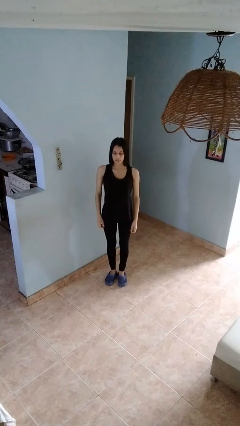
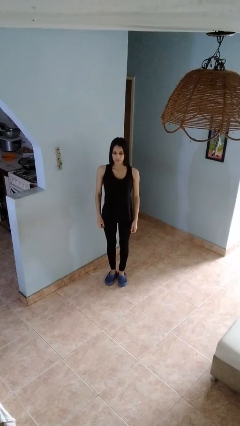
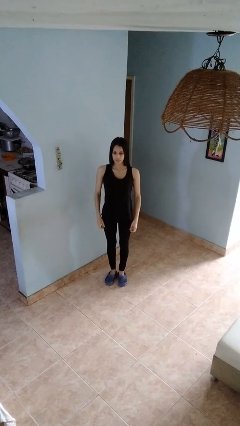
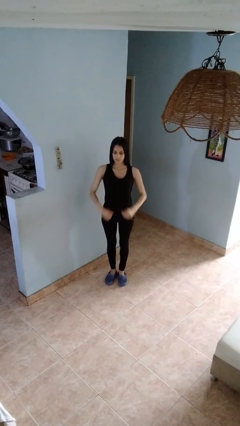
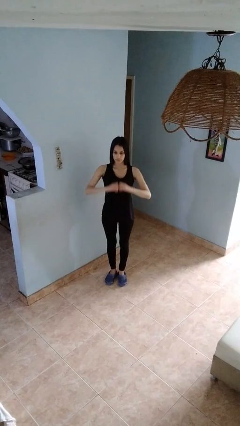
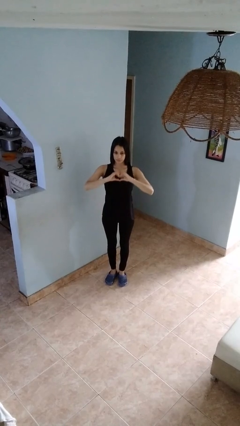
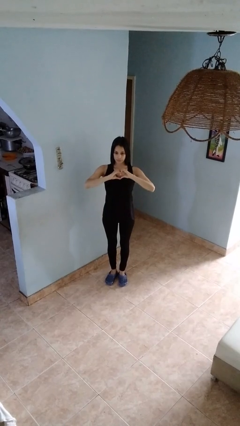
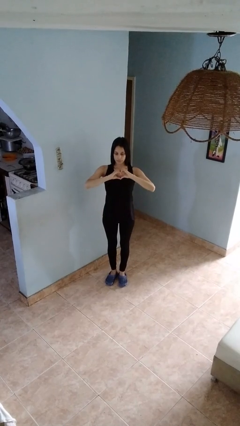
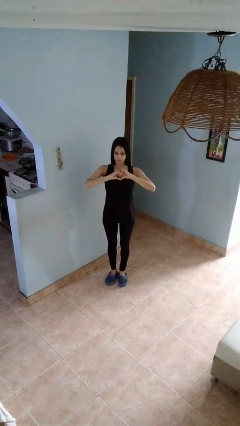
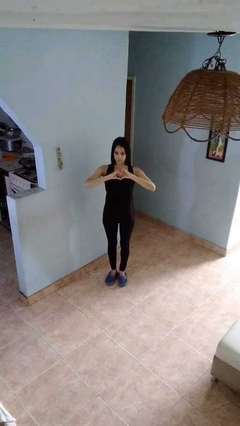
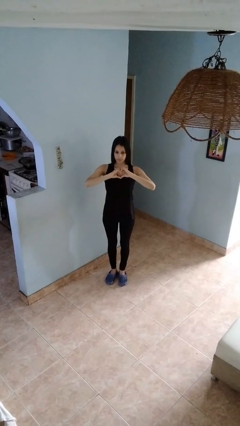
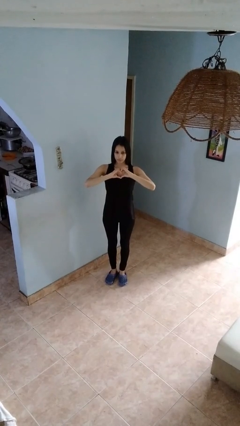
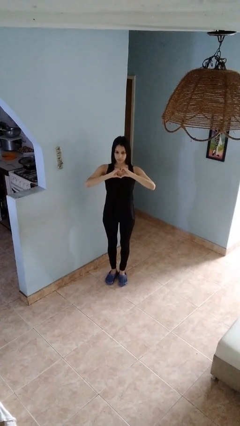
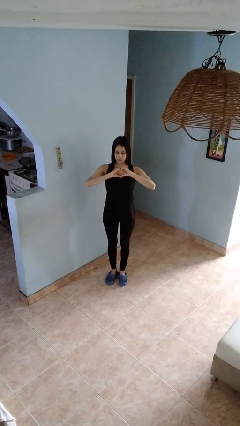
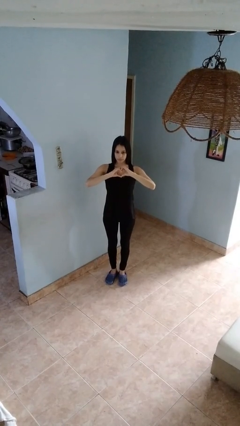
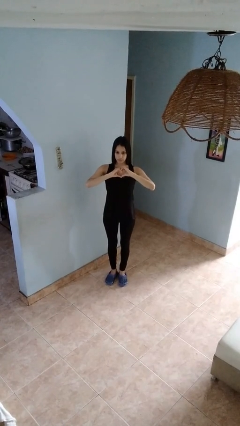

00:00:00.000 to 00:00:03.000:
person gestures heart

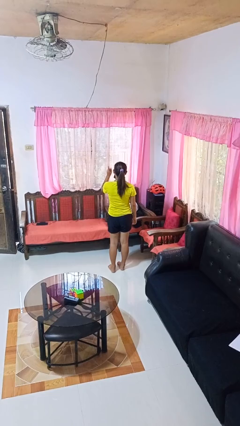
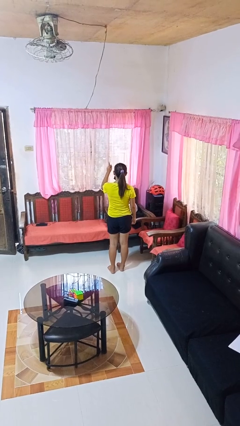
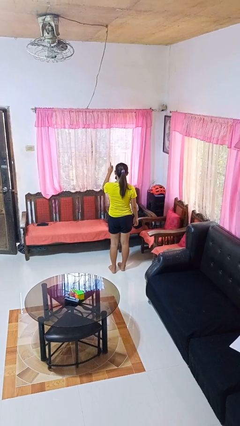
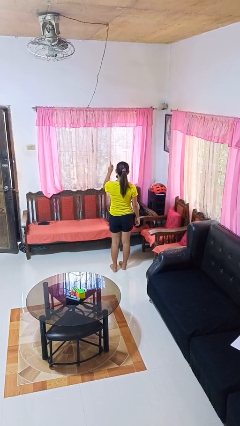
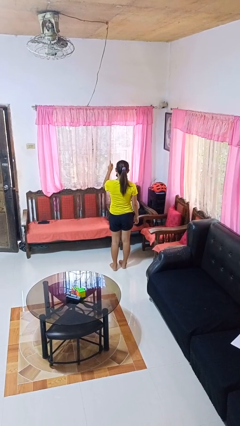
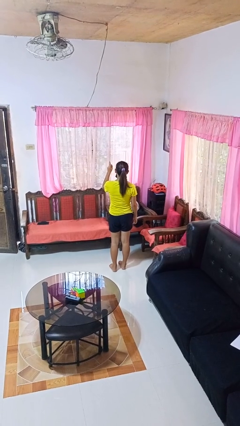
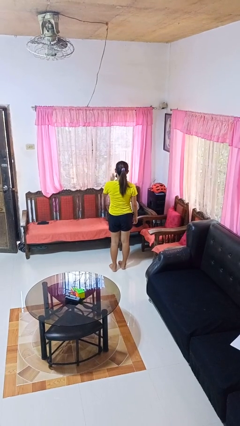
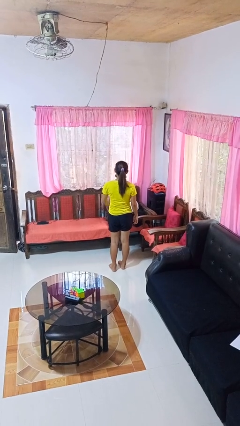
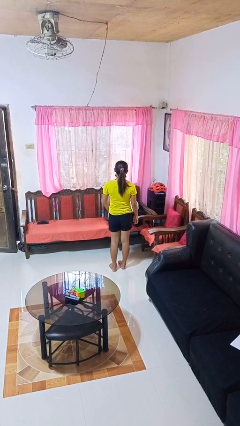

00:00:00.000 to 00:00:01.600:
person gestures number one

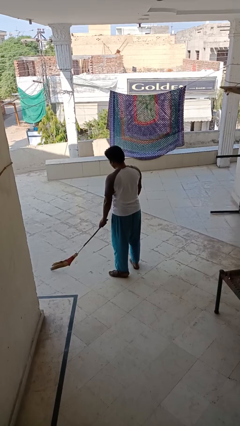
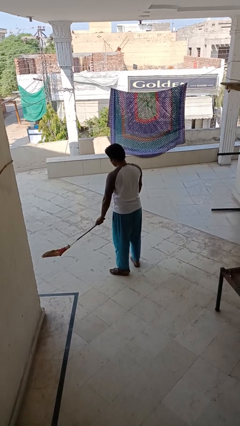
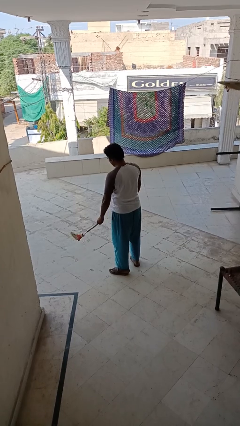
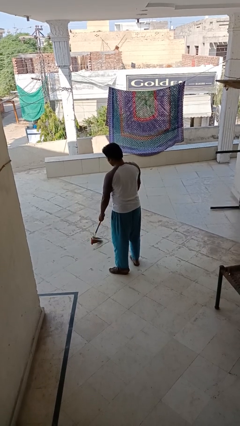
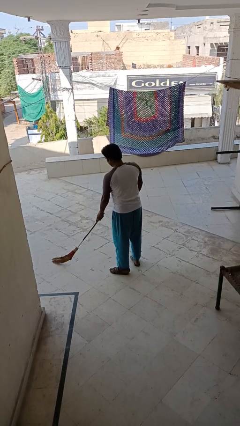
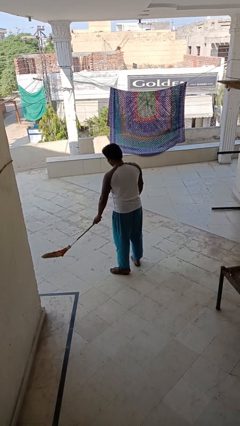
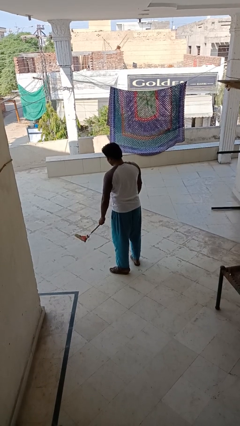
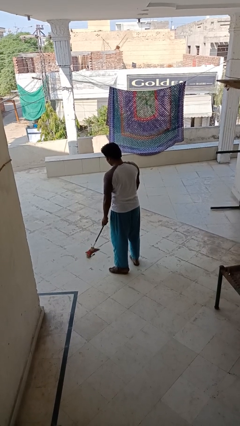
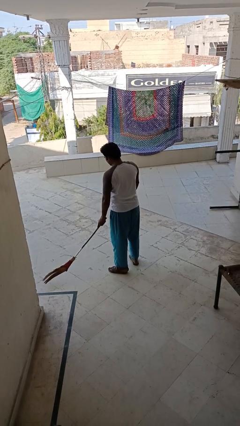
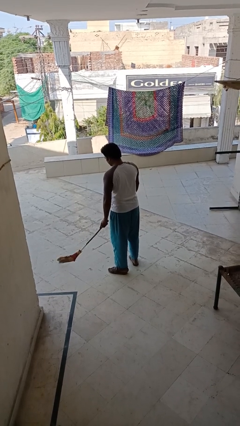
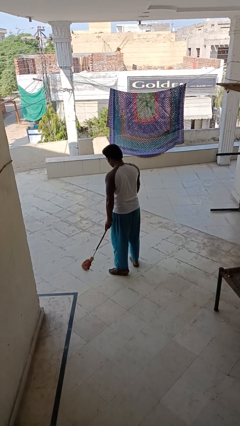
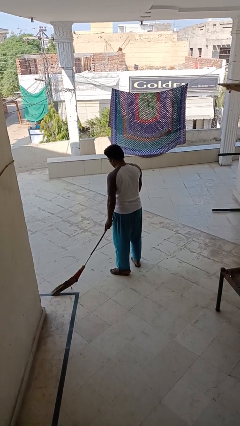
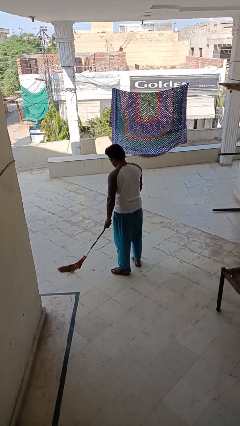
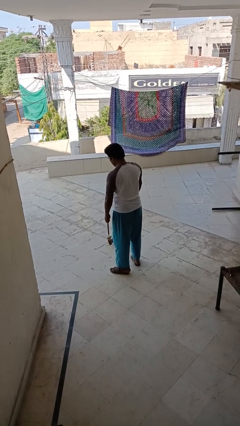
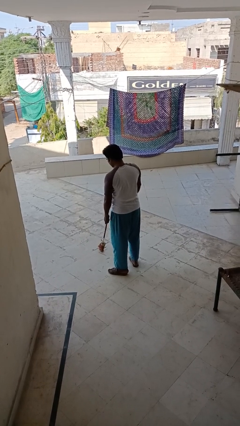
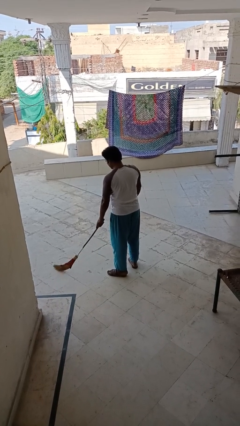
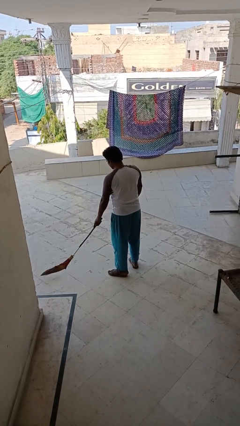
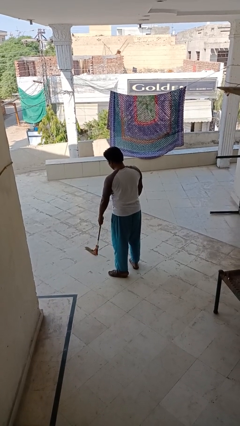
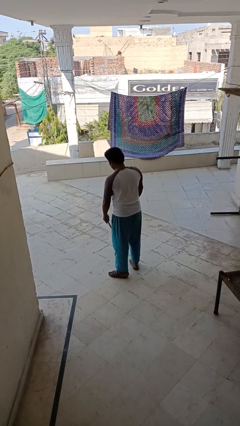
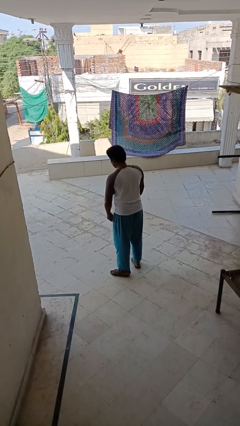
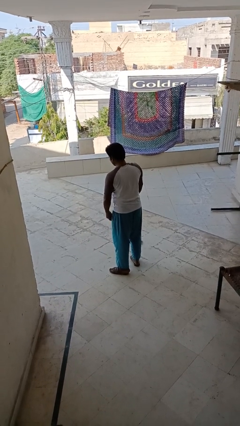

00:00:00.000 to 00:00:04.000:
person sweeps floor

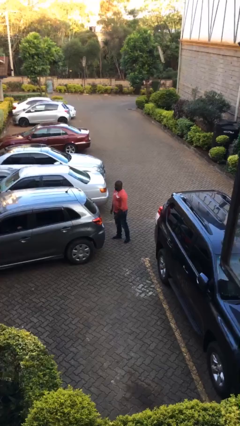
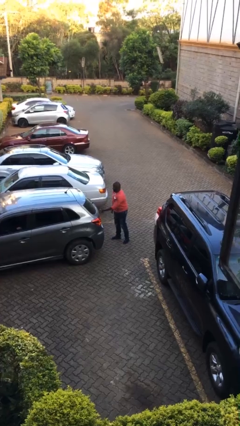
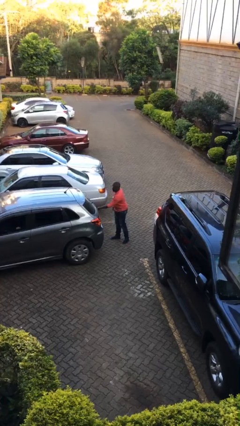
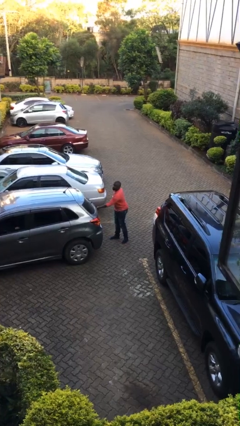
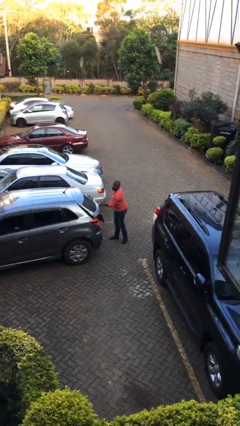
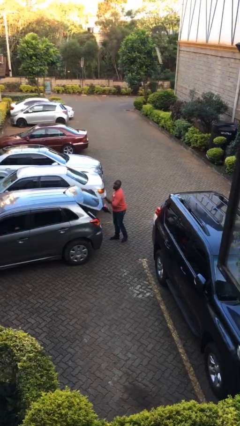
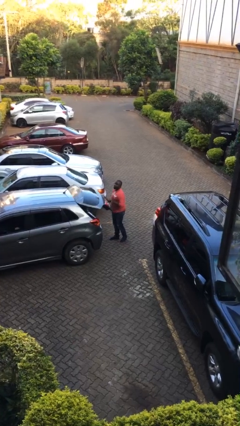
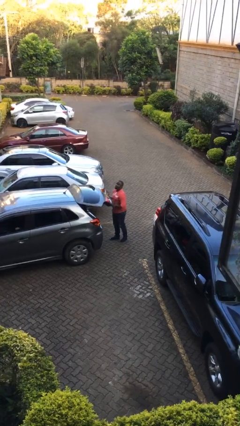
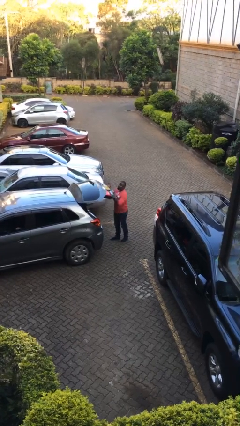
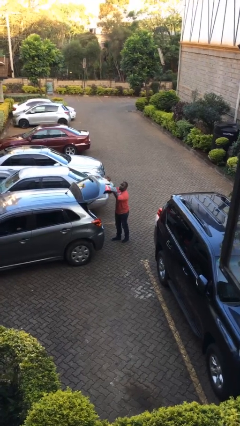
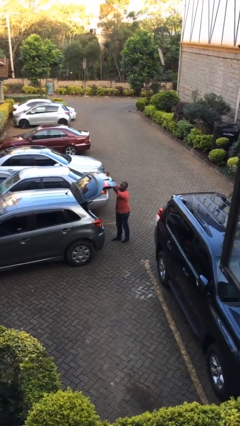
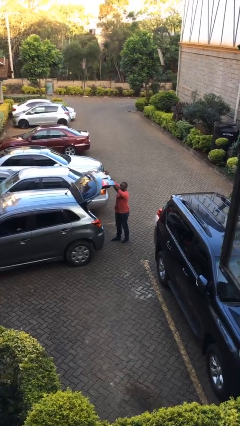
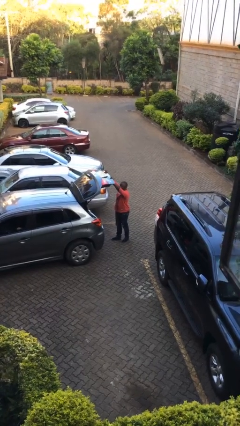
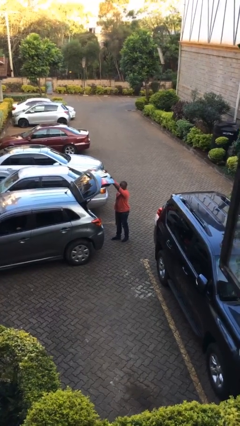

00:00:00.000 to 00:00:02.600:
person opens car trunk

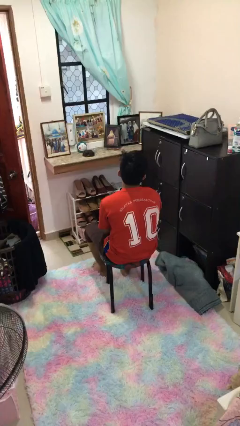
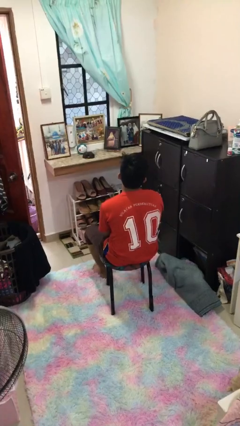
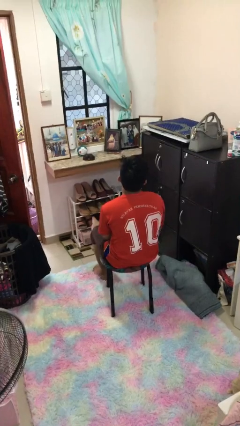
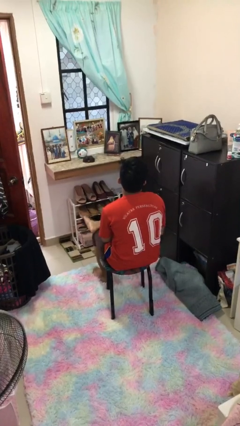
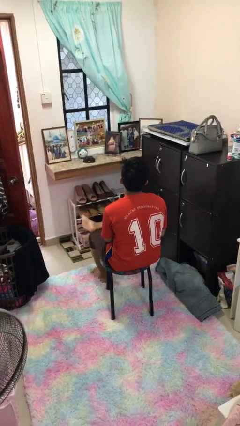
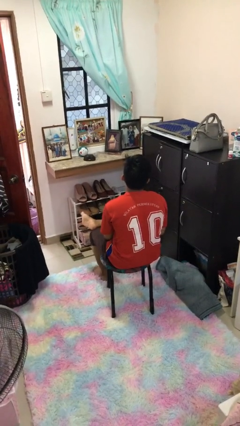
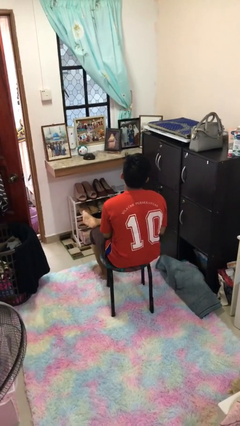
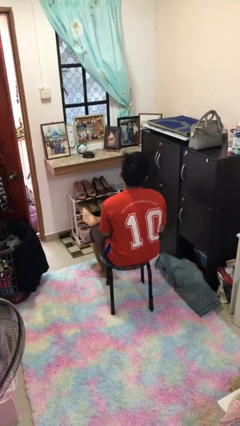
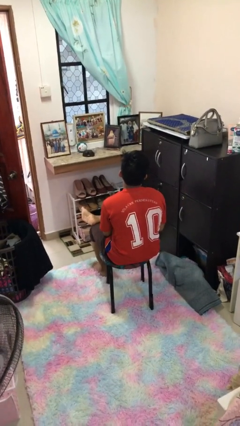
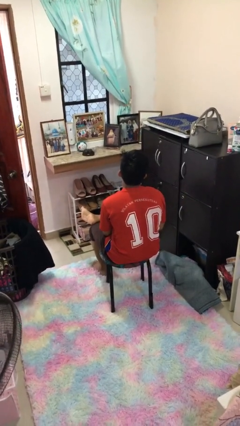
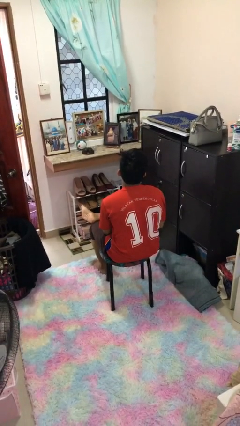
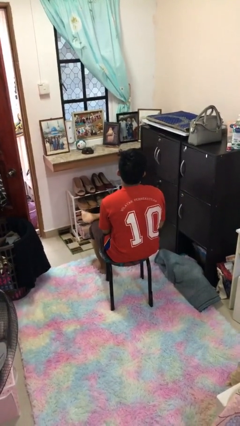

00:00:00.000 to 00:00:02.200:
person crosses legs

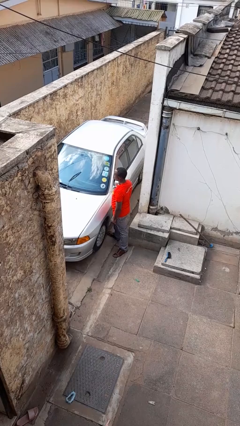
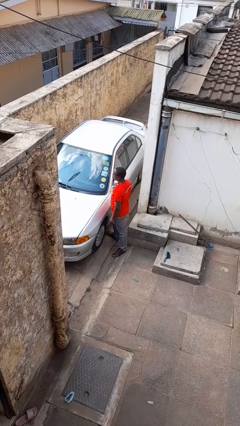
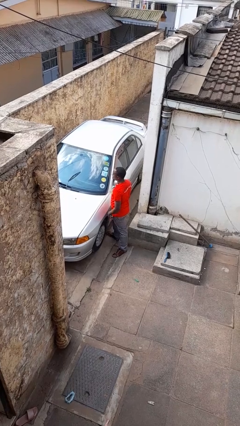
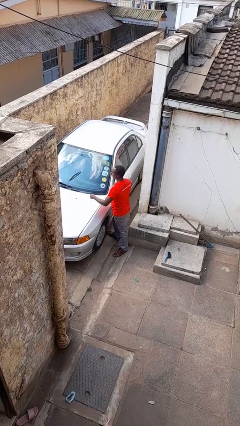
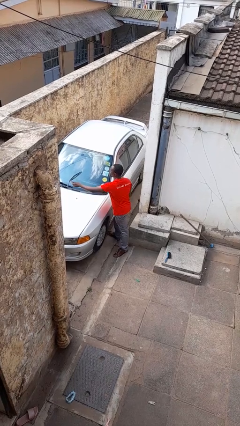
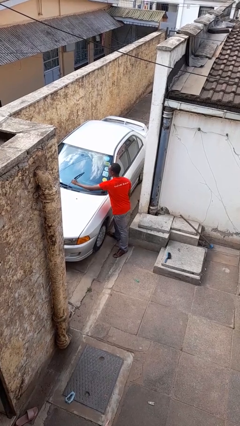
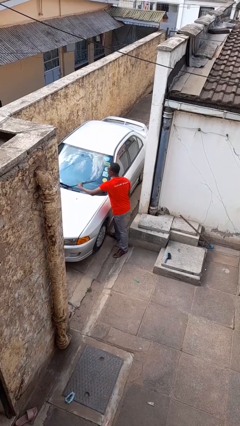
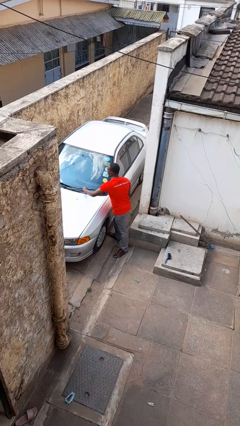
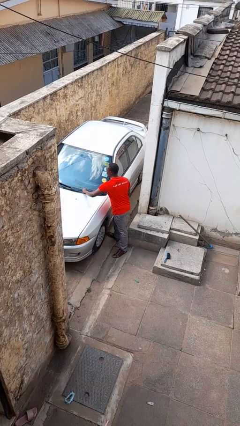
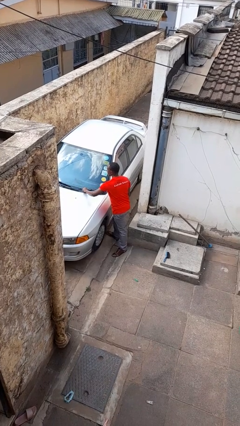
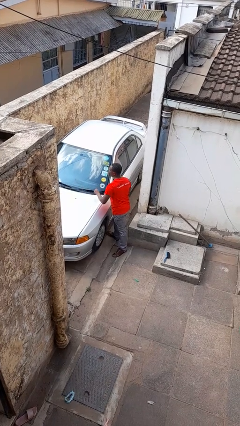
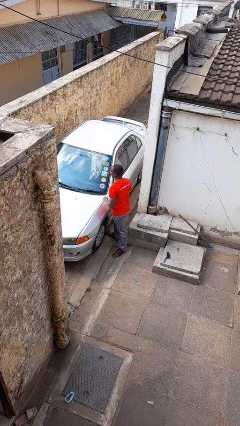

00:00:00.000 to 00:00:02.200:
person flips down car wipers

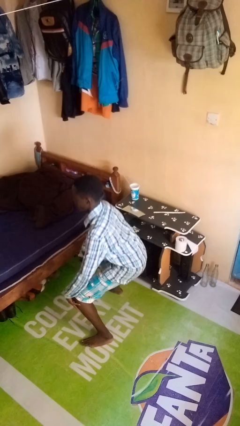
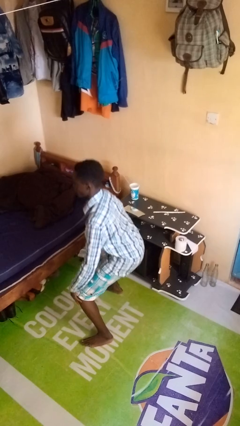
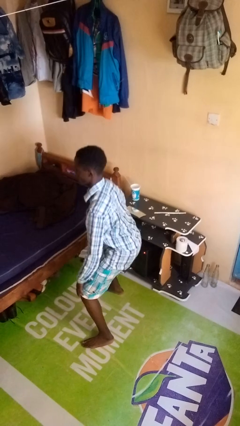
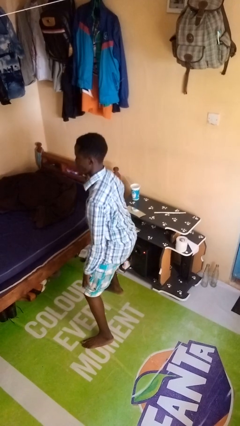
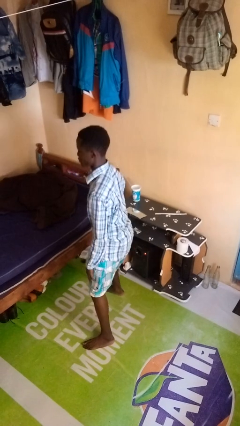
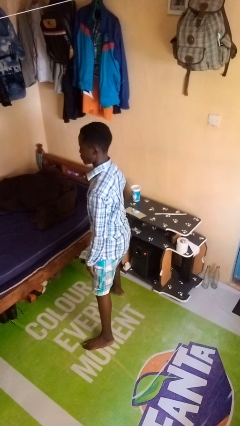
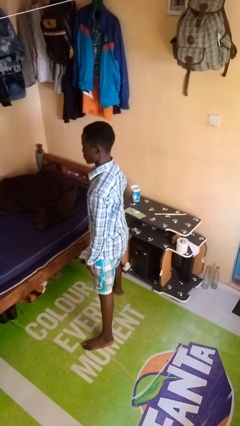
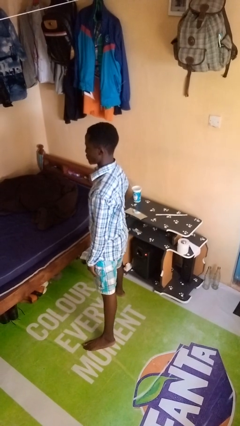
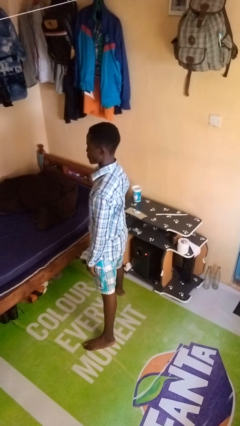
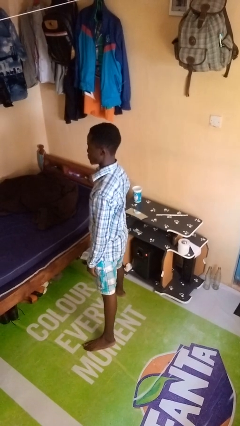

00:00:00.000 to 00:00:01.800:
person stands up
